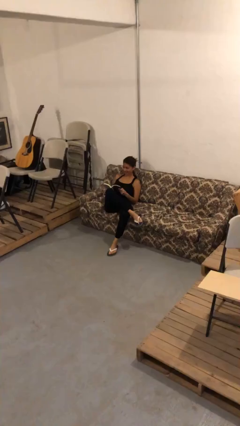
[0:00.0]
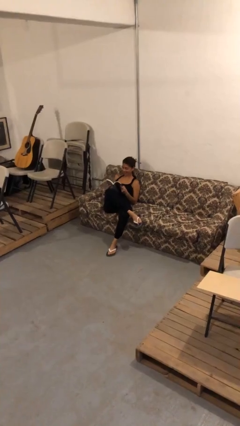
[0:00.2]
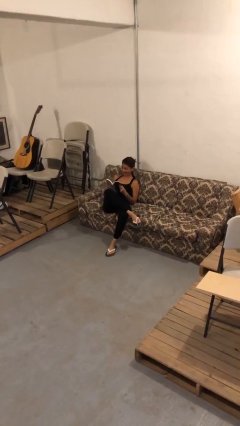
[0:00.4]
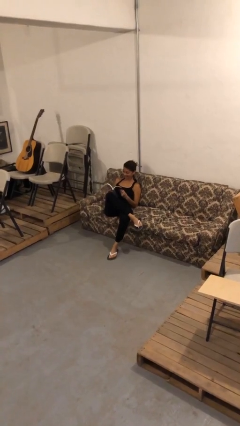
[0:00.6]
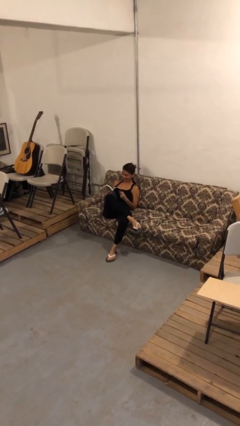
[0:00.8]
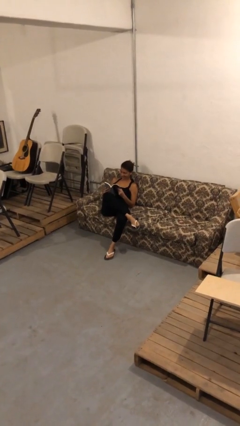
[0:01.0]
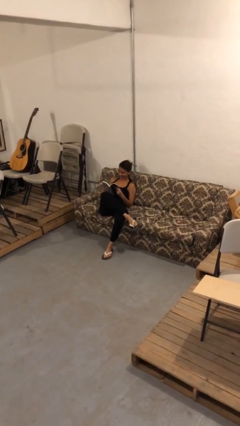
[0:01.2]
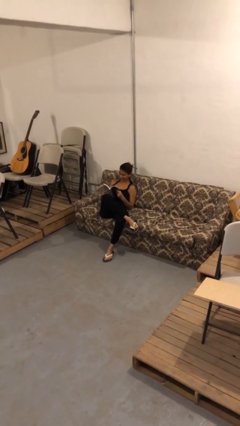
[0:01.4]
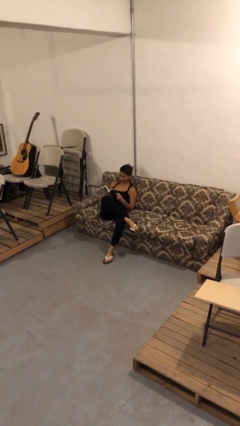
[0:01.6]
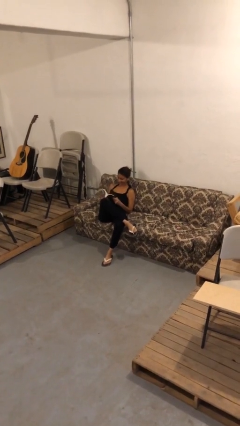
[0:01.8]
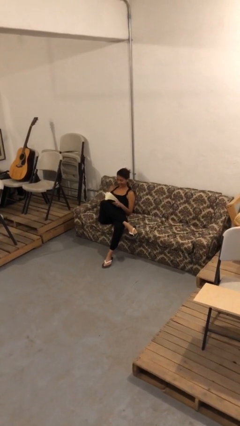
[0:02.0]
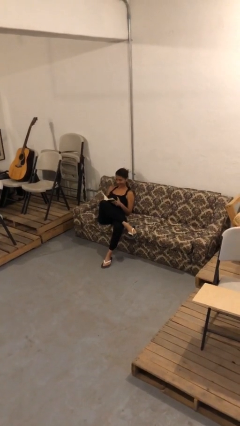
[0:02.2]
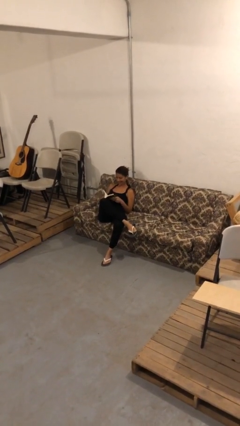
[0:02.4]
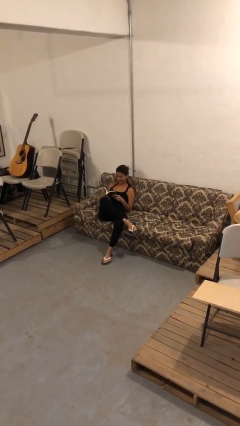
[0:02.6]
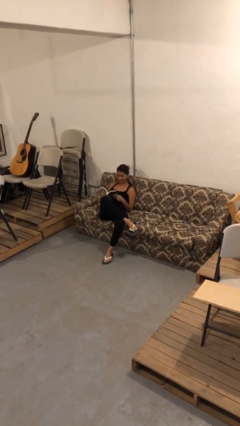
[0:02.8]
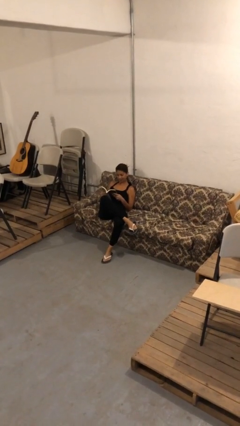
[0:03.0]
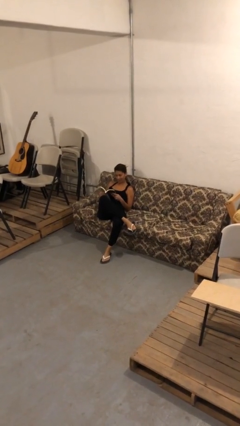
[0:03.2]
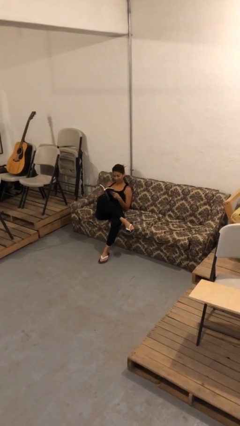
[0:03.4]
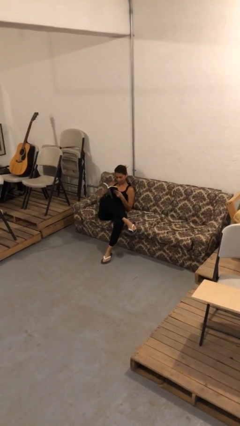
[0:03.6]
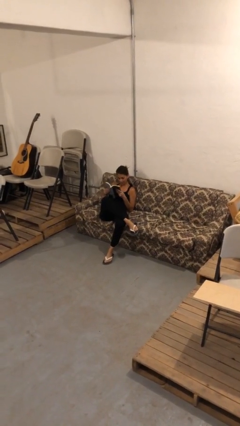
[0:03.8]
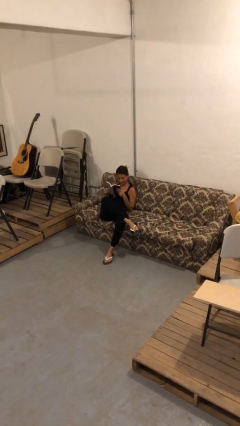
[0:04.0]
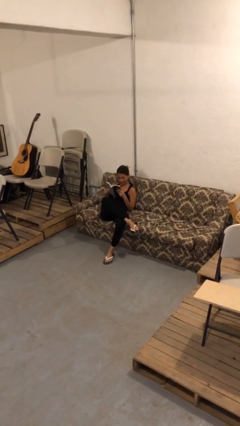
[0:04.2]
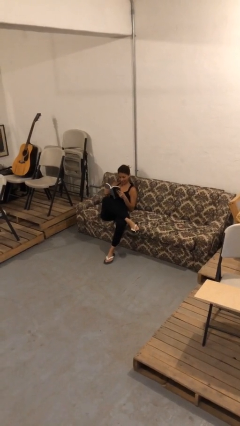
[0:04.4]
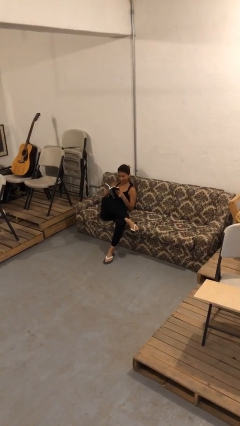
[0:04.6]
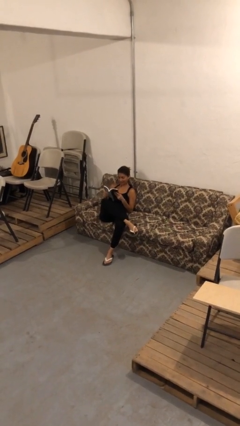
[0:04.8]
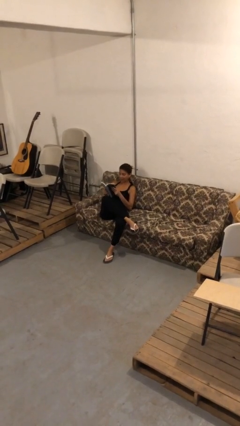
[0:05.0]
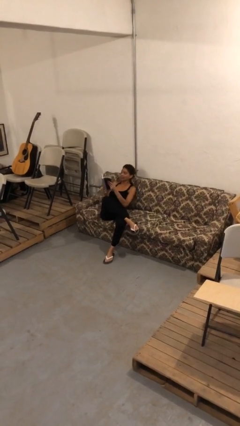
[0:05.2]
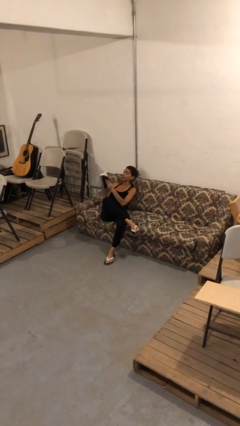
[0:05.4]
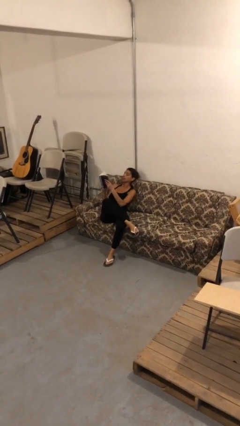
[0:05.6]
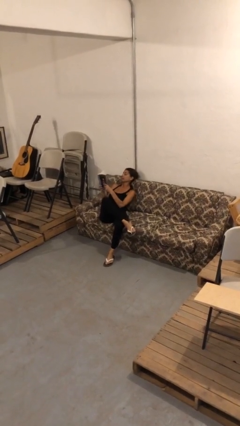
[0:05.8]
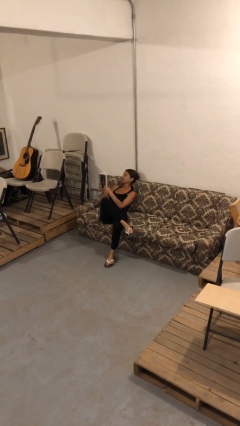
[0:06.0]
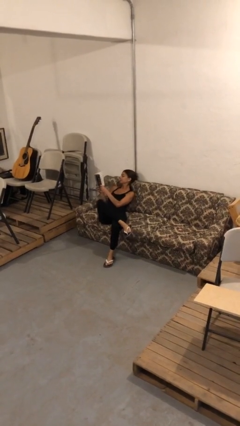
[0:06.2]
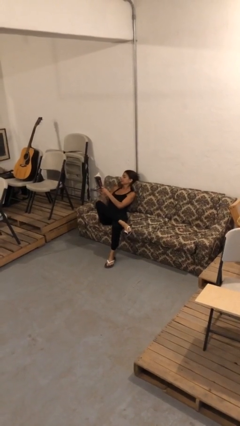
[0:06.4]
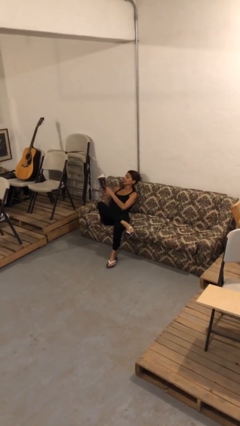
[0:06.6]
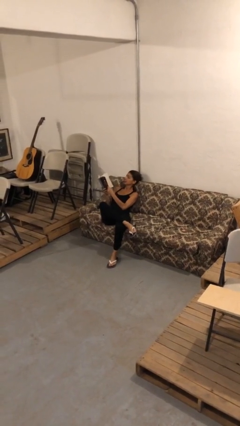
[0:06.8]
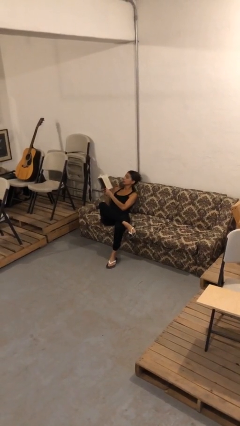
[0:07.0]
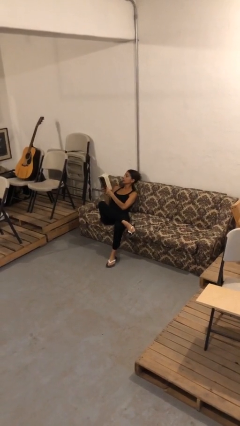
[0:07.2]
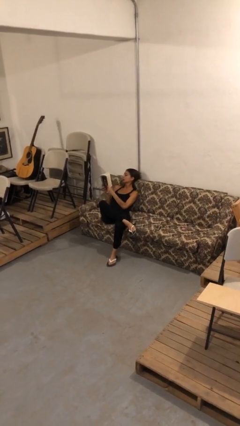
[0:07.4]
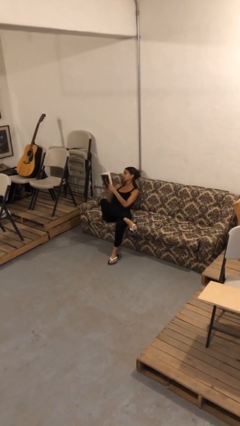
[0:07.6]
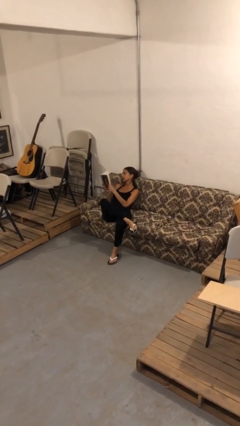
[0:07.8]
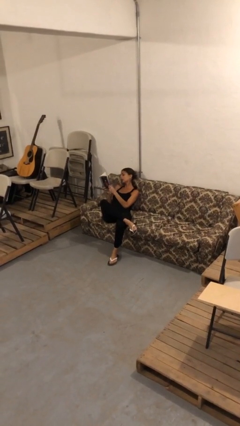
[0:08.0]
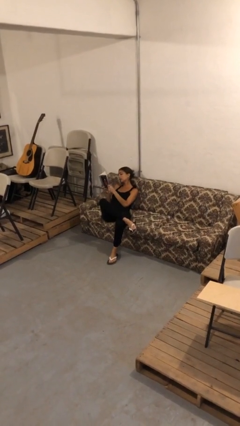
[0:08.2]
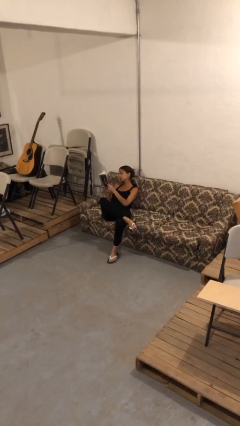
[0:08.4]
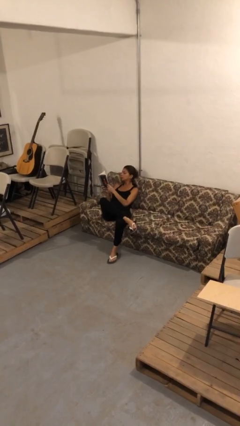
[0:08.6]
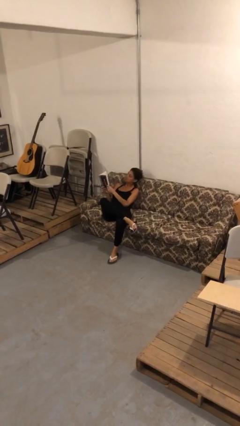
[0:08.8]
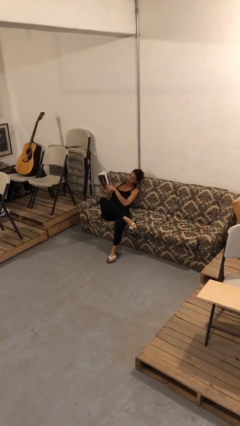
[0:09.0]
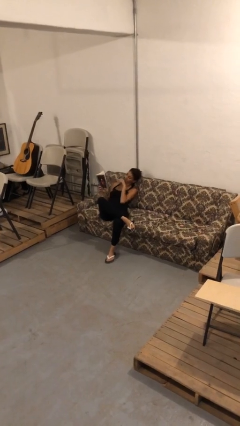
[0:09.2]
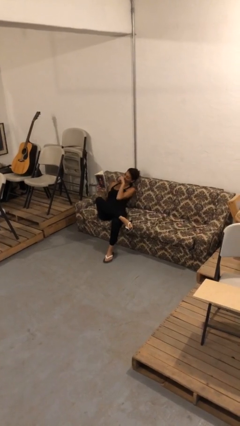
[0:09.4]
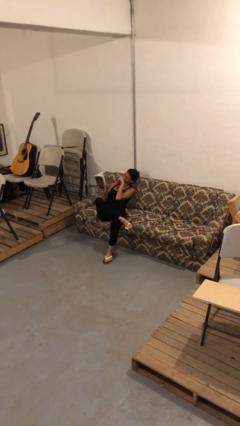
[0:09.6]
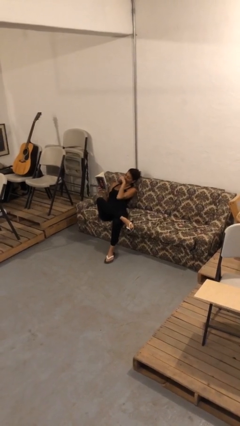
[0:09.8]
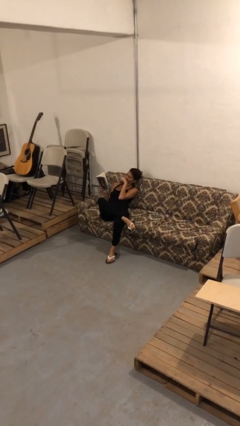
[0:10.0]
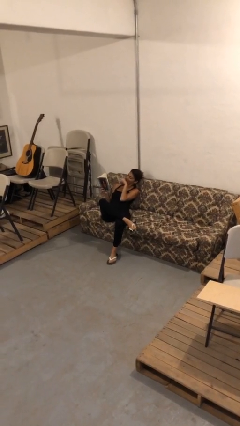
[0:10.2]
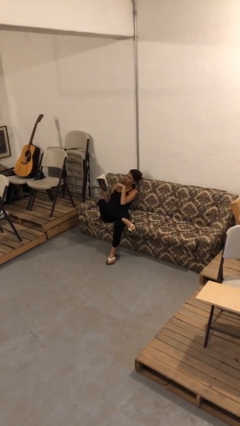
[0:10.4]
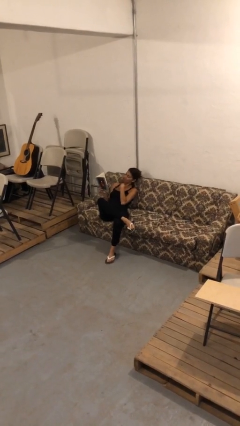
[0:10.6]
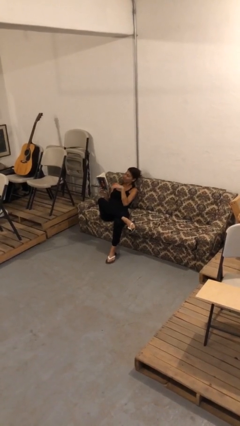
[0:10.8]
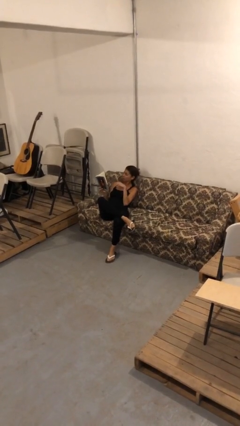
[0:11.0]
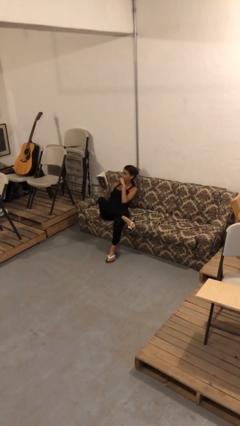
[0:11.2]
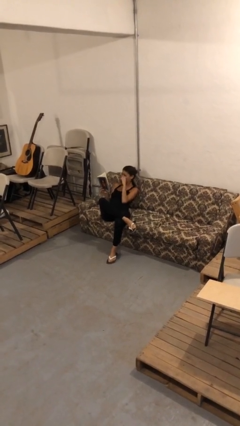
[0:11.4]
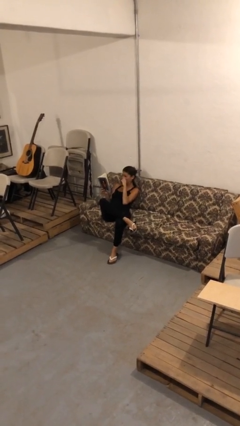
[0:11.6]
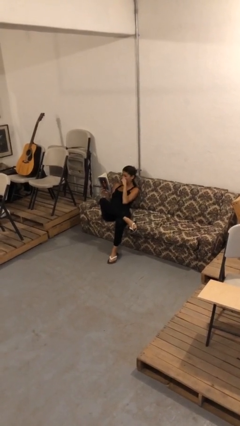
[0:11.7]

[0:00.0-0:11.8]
person reads document

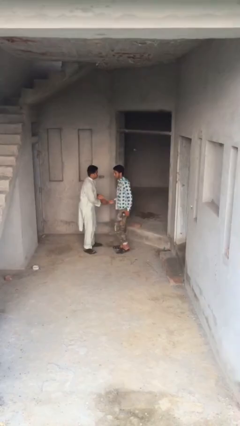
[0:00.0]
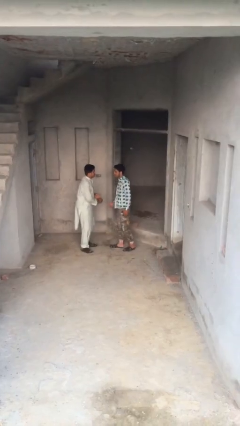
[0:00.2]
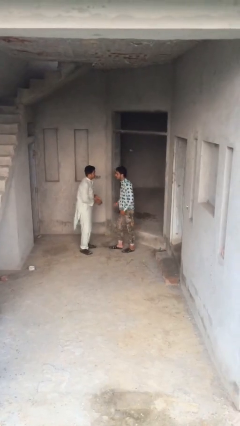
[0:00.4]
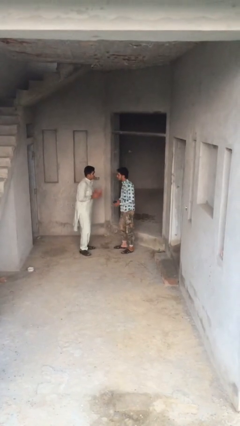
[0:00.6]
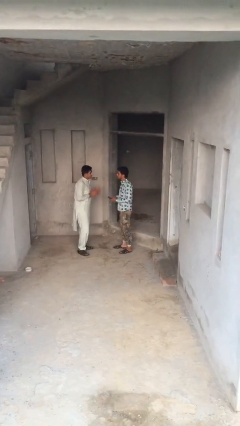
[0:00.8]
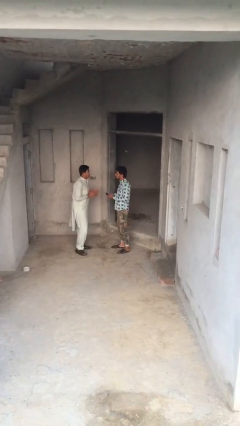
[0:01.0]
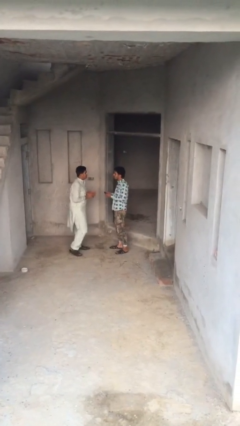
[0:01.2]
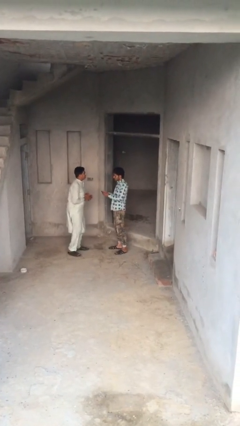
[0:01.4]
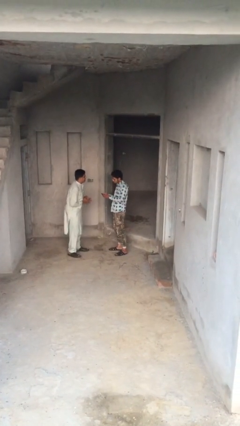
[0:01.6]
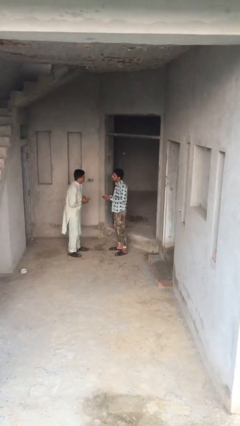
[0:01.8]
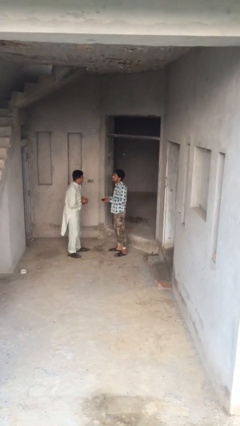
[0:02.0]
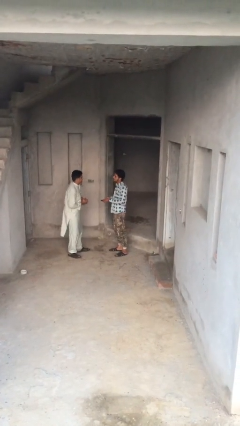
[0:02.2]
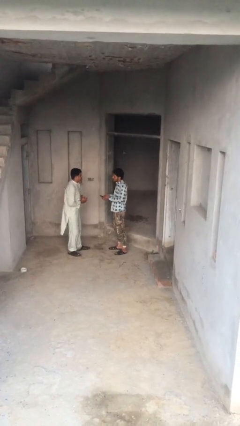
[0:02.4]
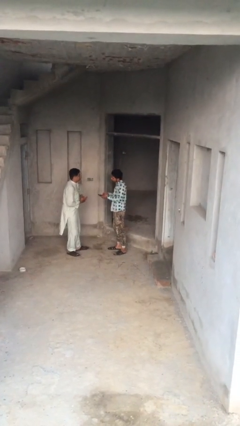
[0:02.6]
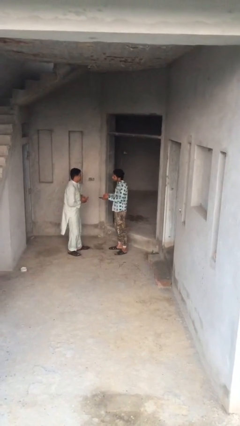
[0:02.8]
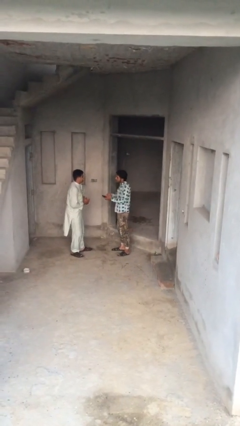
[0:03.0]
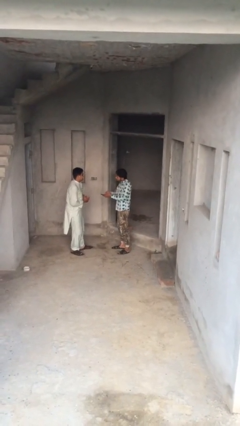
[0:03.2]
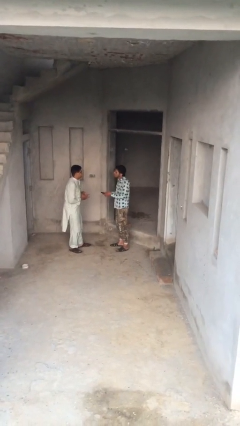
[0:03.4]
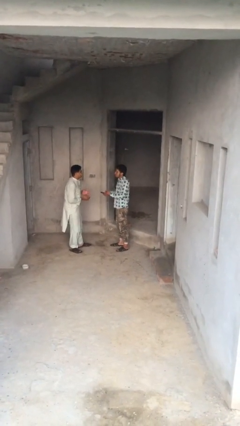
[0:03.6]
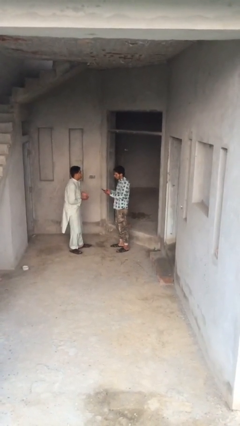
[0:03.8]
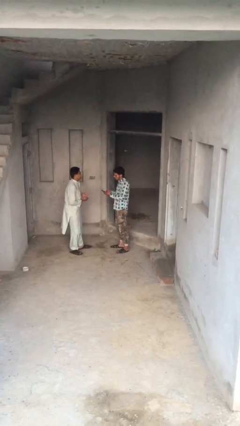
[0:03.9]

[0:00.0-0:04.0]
person talks to person

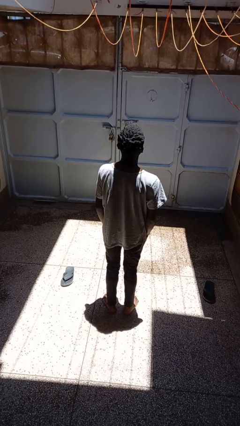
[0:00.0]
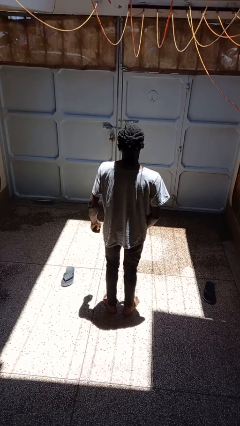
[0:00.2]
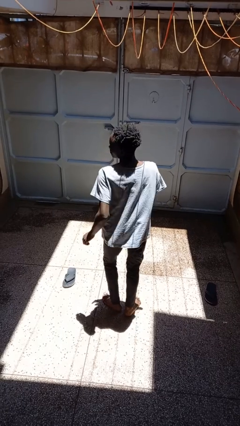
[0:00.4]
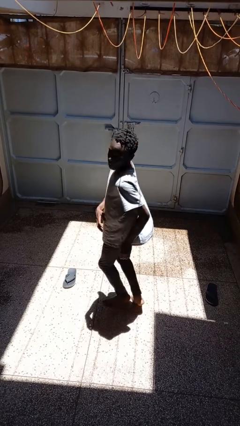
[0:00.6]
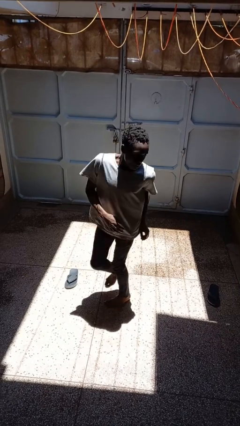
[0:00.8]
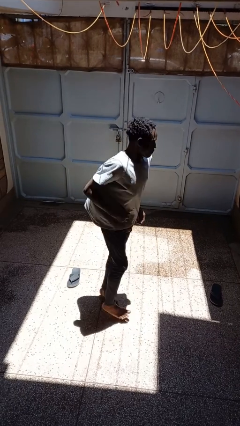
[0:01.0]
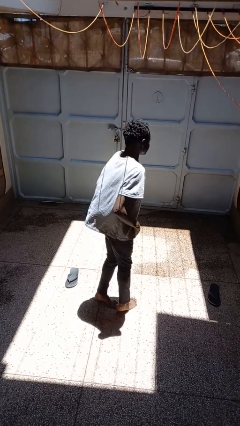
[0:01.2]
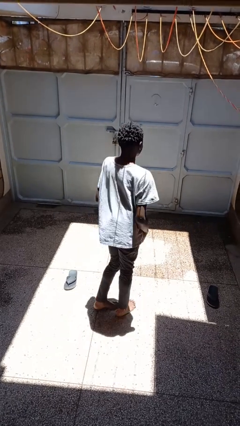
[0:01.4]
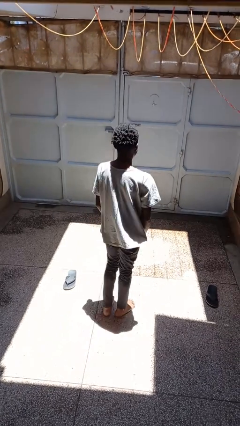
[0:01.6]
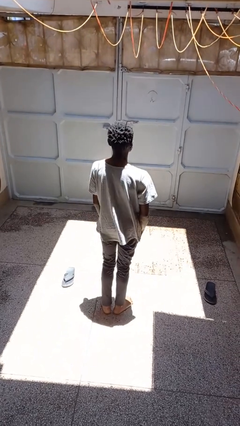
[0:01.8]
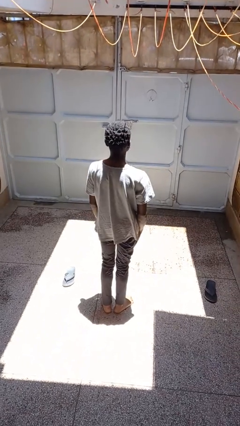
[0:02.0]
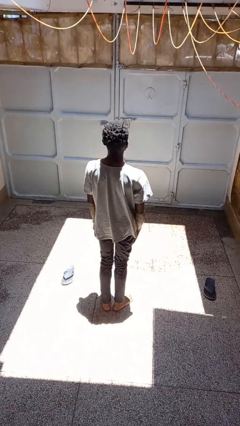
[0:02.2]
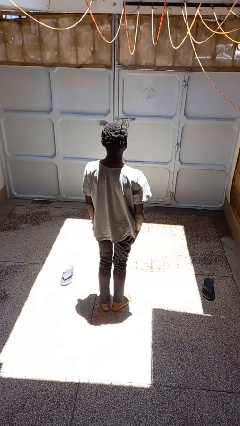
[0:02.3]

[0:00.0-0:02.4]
person twirls
